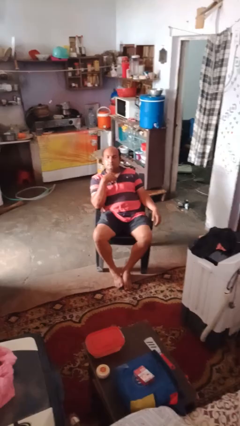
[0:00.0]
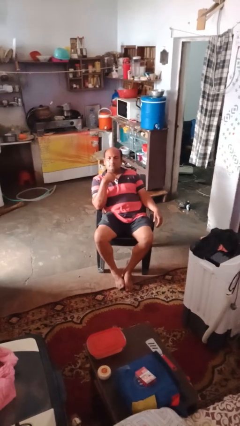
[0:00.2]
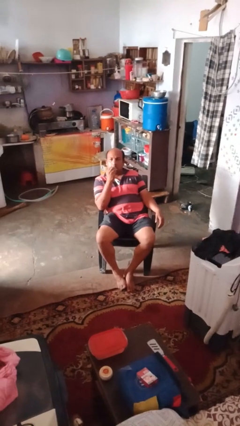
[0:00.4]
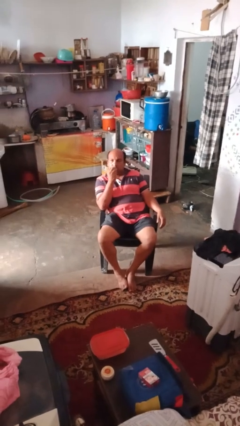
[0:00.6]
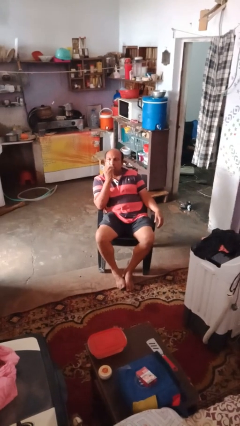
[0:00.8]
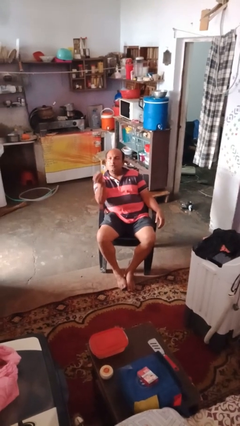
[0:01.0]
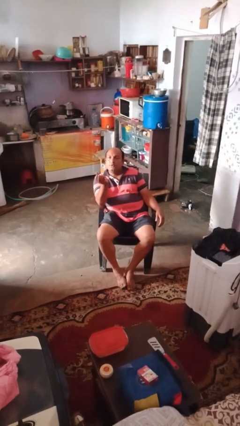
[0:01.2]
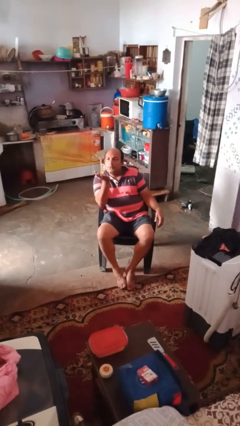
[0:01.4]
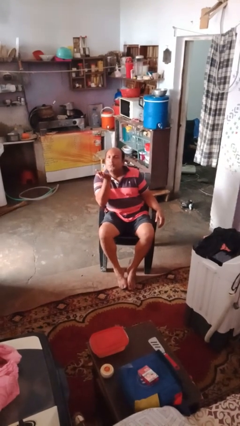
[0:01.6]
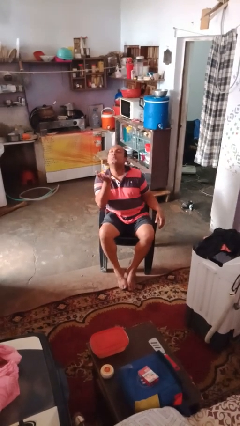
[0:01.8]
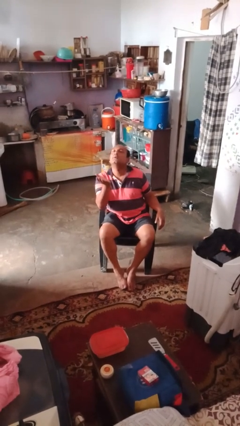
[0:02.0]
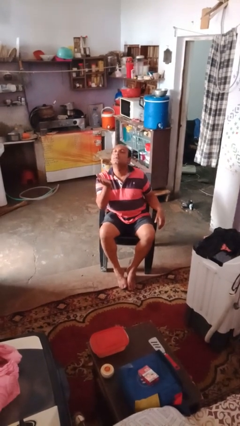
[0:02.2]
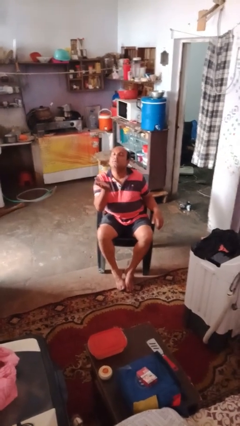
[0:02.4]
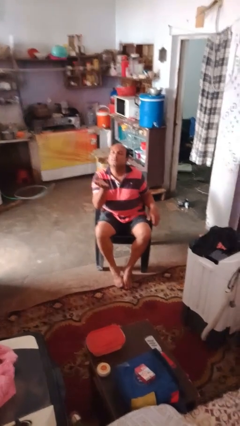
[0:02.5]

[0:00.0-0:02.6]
person gestures blow kiss

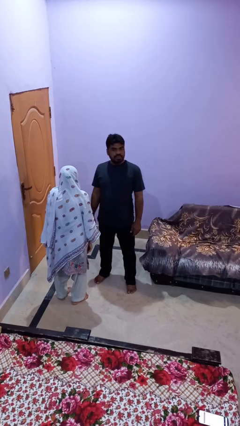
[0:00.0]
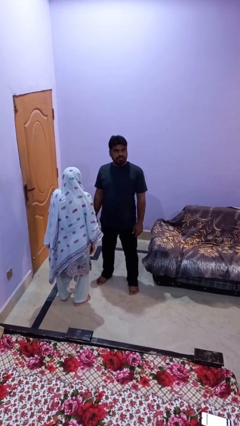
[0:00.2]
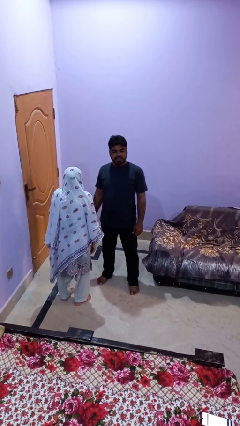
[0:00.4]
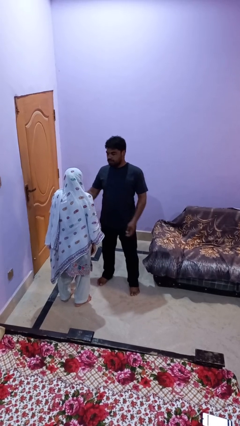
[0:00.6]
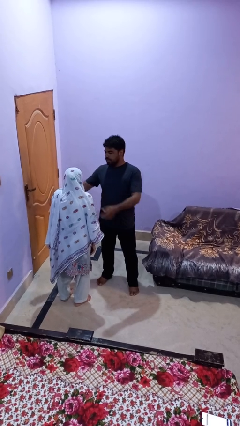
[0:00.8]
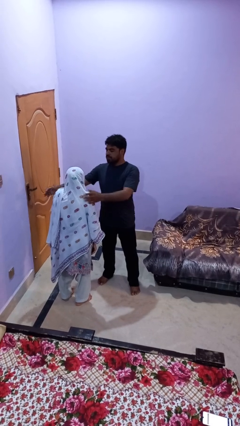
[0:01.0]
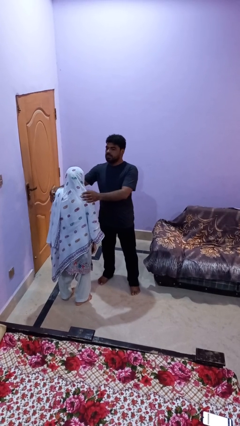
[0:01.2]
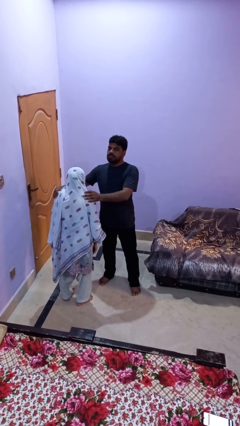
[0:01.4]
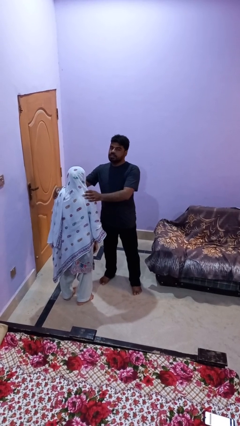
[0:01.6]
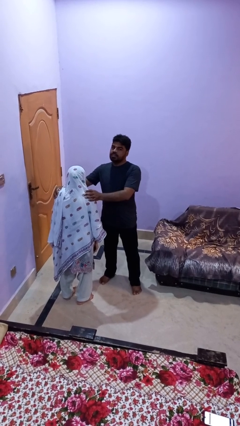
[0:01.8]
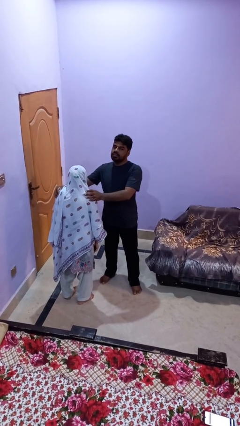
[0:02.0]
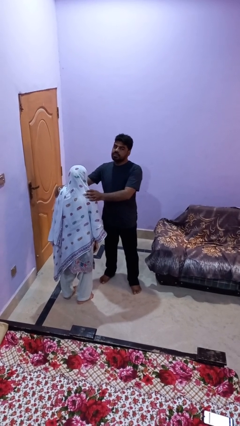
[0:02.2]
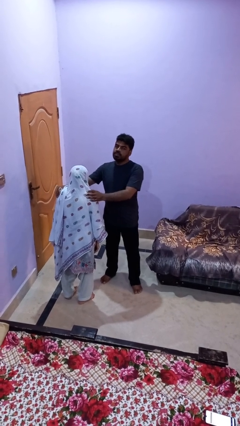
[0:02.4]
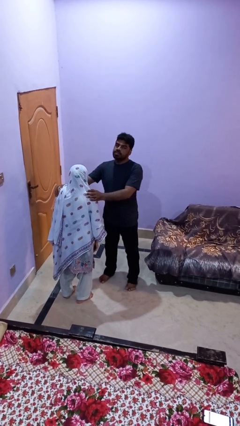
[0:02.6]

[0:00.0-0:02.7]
person grabs person by shoulder

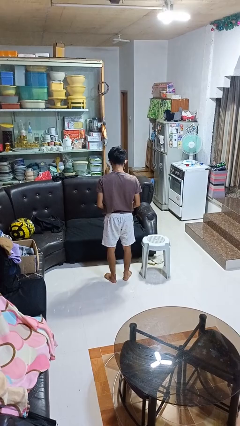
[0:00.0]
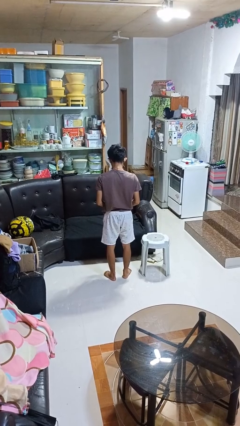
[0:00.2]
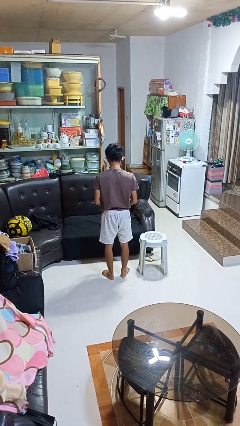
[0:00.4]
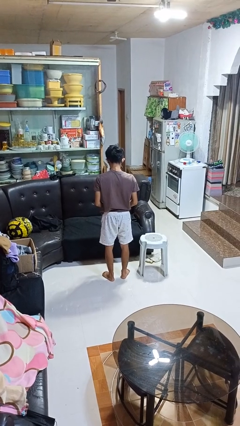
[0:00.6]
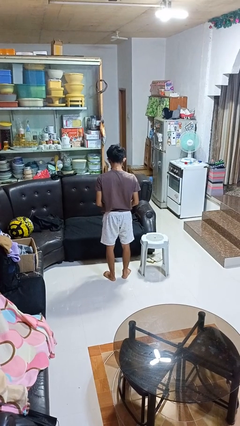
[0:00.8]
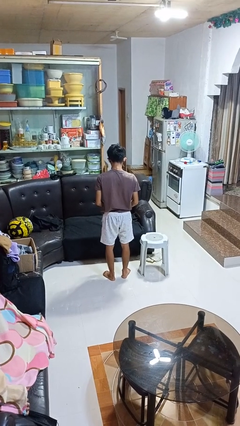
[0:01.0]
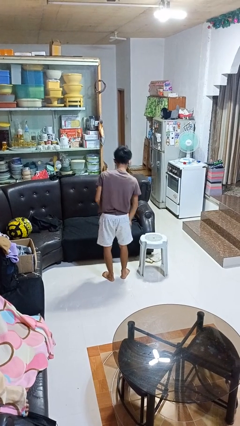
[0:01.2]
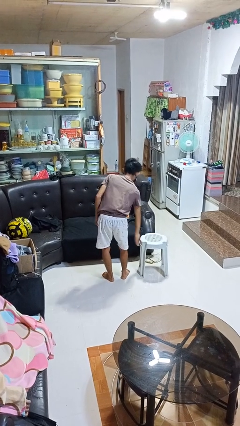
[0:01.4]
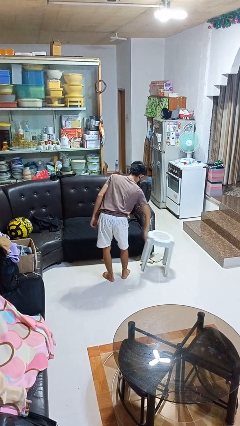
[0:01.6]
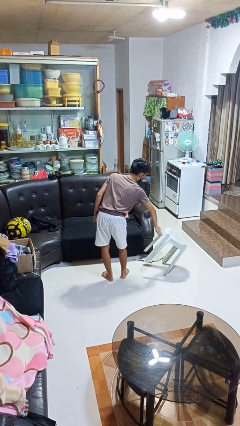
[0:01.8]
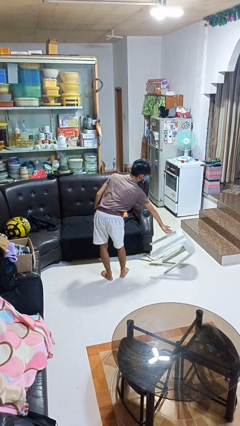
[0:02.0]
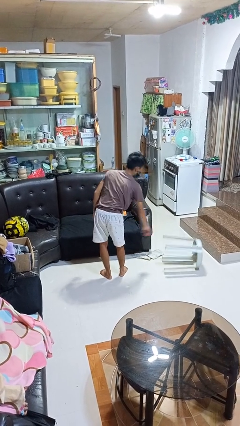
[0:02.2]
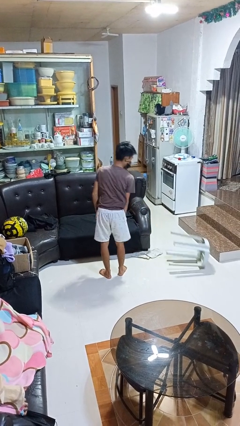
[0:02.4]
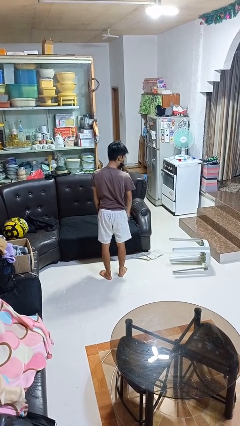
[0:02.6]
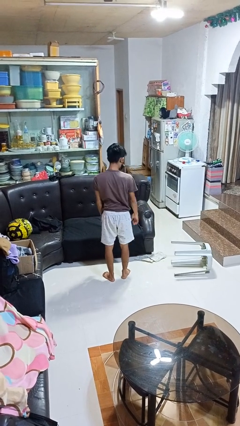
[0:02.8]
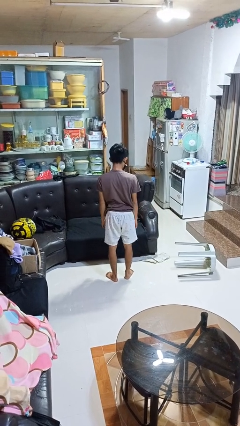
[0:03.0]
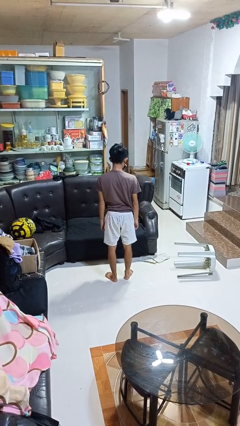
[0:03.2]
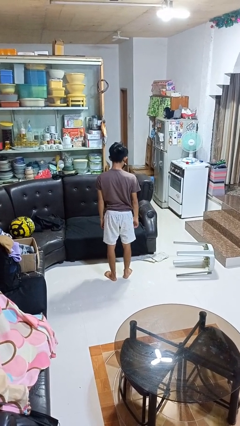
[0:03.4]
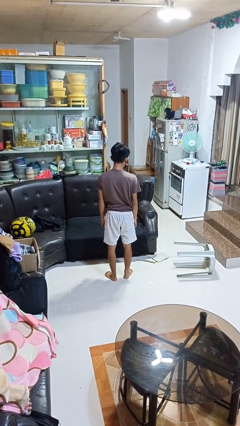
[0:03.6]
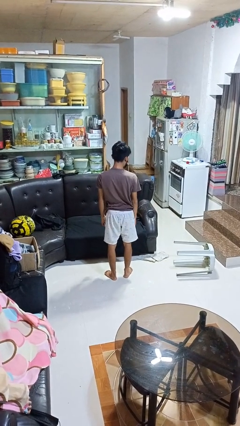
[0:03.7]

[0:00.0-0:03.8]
person knocks over furniture

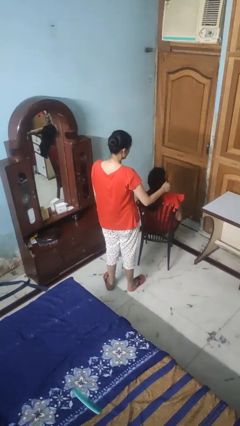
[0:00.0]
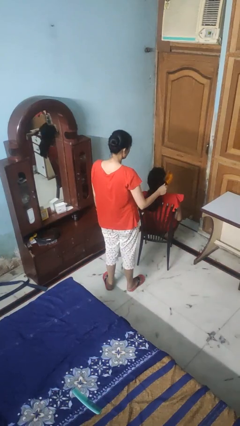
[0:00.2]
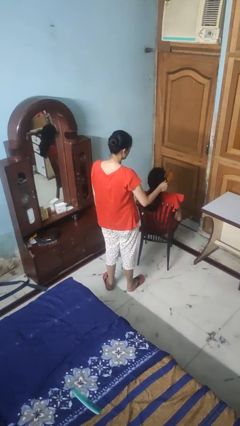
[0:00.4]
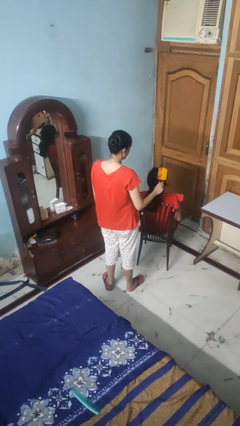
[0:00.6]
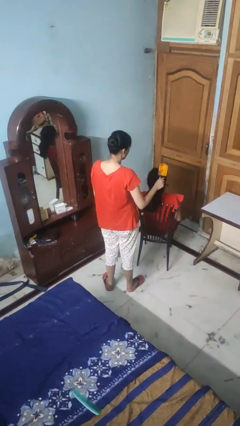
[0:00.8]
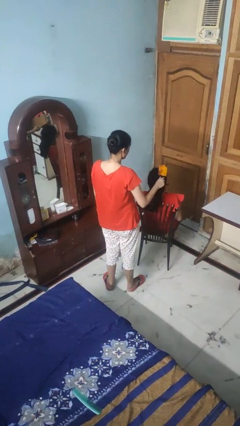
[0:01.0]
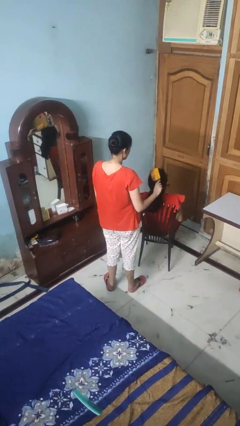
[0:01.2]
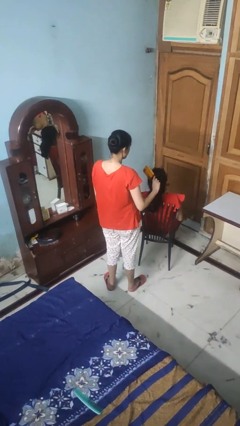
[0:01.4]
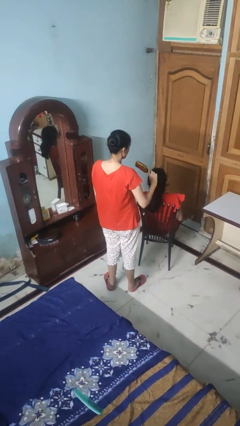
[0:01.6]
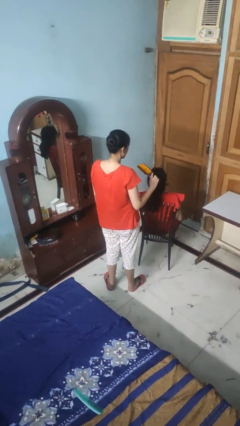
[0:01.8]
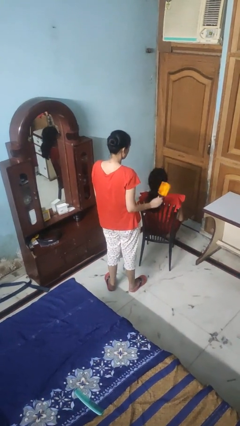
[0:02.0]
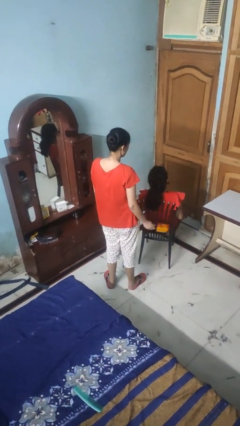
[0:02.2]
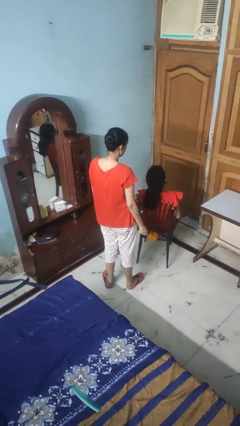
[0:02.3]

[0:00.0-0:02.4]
person brushes hair of person

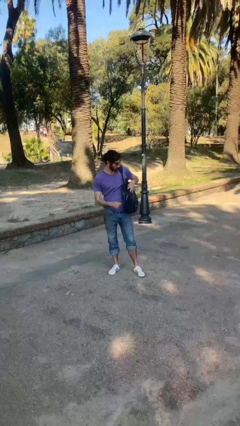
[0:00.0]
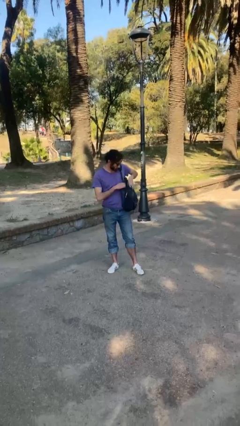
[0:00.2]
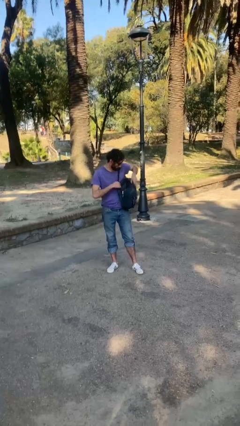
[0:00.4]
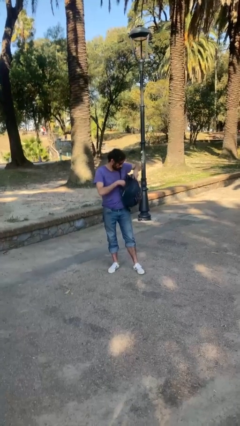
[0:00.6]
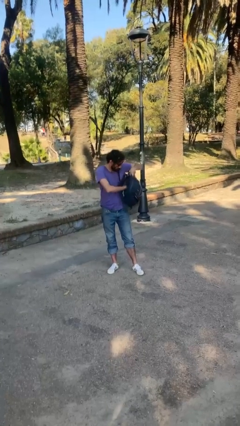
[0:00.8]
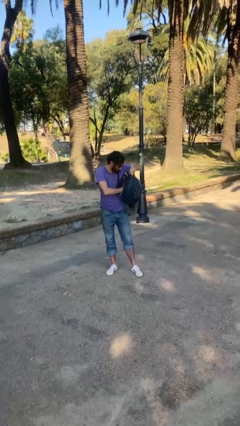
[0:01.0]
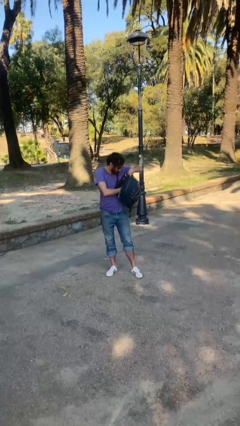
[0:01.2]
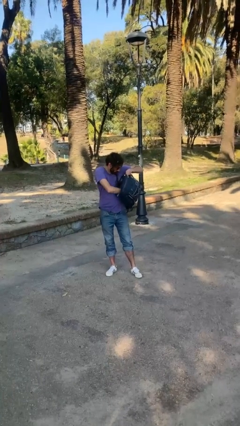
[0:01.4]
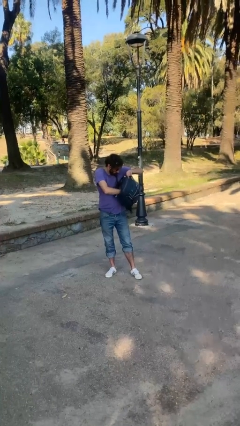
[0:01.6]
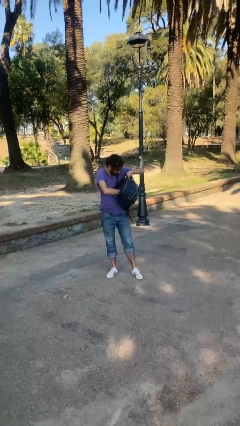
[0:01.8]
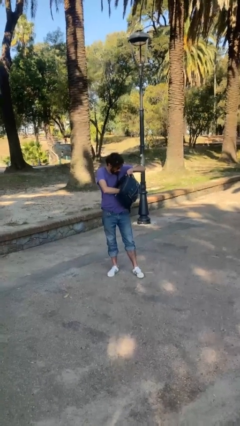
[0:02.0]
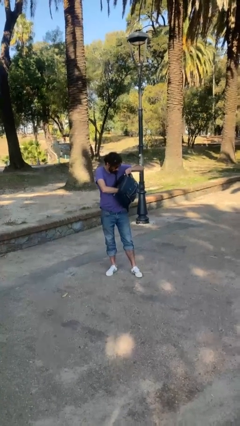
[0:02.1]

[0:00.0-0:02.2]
person searches in backpack

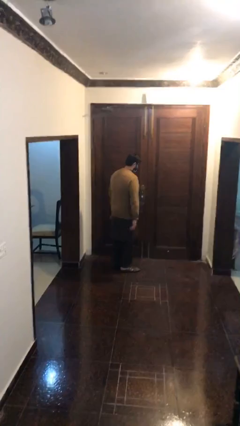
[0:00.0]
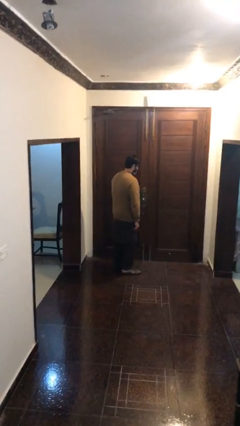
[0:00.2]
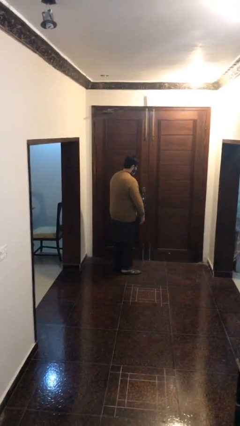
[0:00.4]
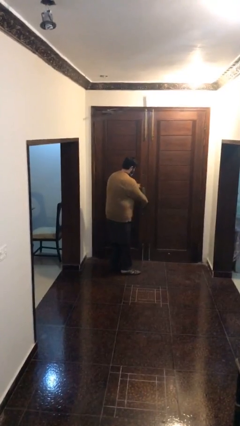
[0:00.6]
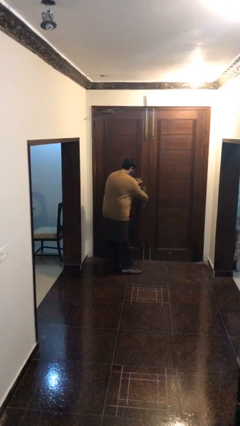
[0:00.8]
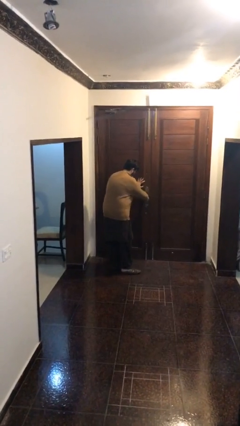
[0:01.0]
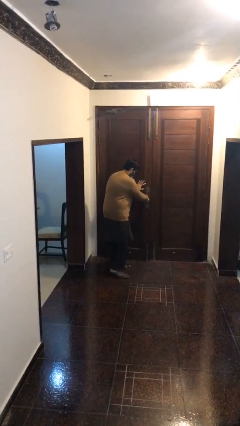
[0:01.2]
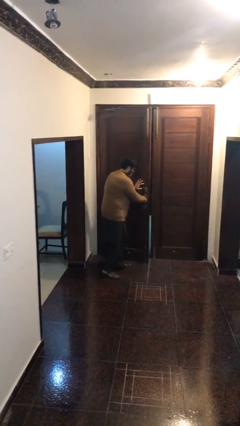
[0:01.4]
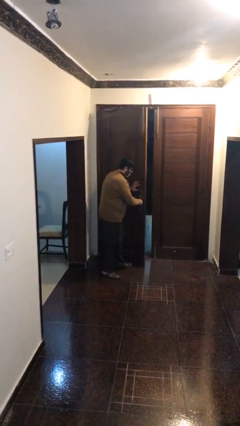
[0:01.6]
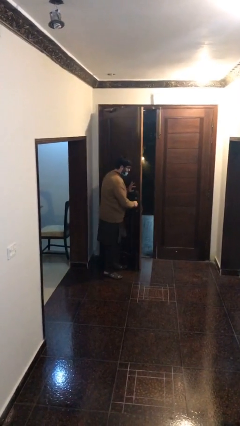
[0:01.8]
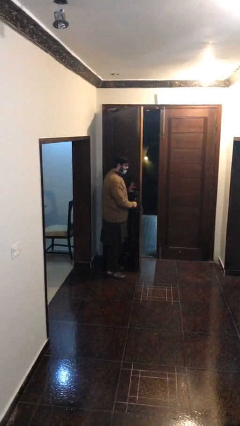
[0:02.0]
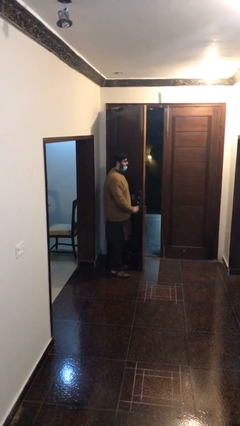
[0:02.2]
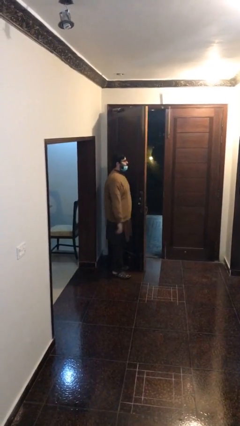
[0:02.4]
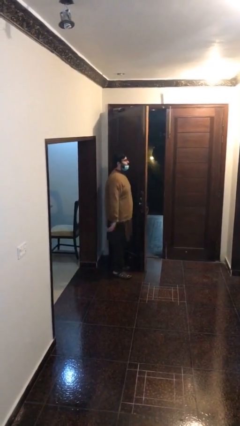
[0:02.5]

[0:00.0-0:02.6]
person opens facility door

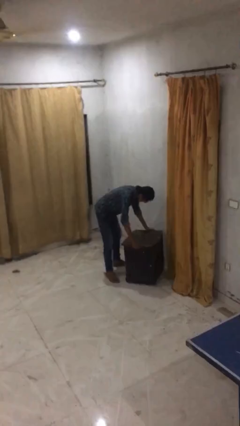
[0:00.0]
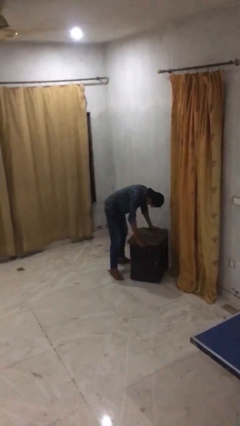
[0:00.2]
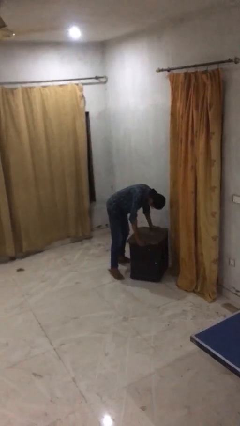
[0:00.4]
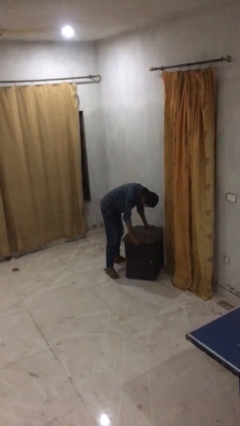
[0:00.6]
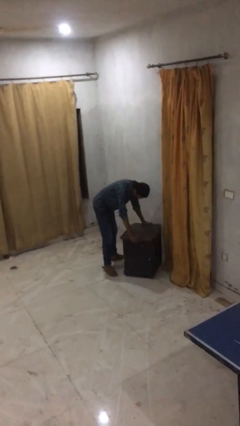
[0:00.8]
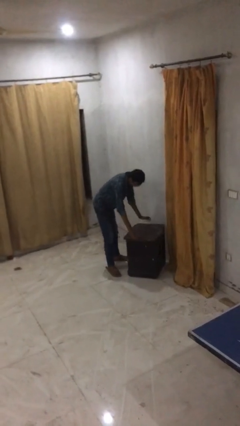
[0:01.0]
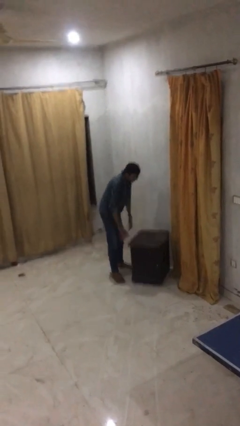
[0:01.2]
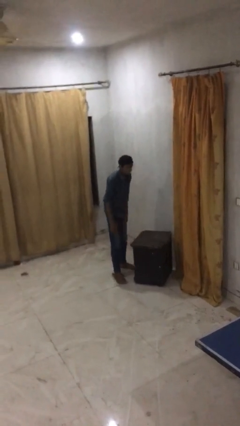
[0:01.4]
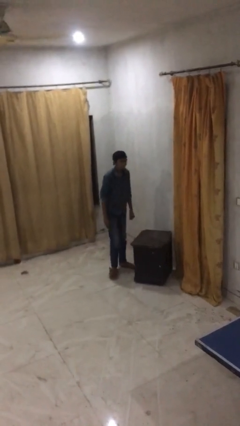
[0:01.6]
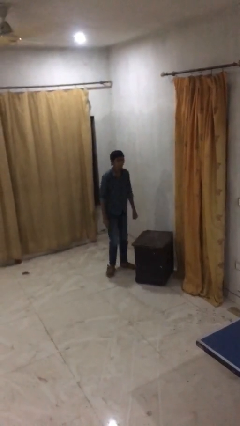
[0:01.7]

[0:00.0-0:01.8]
person puts down object on floor
